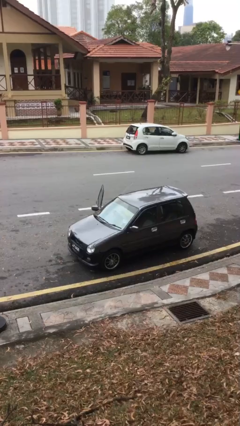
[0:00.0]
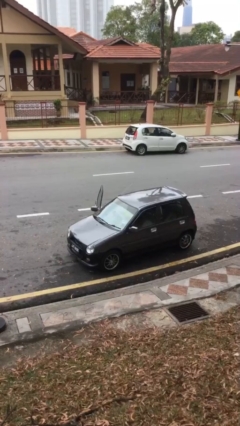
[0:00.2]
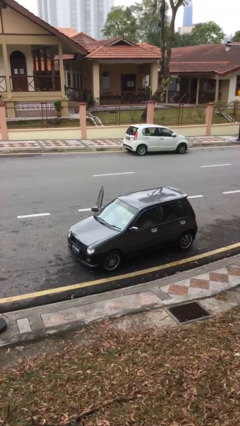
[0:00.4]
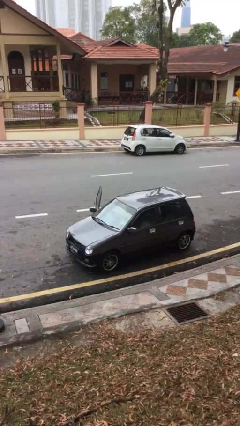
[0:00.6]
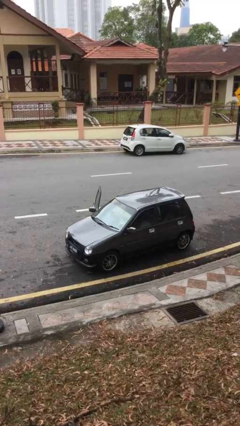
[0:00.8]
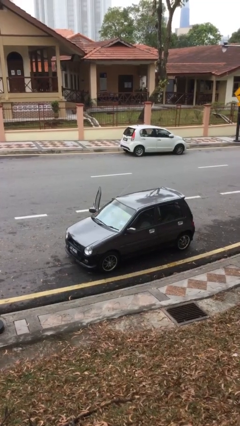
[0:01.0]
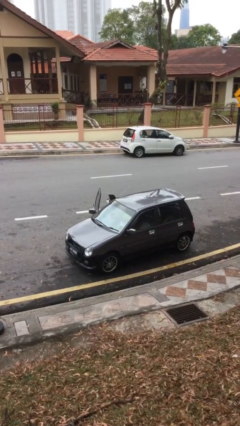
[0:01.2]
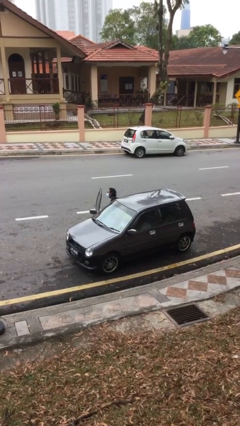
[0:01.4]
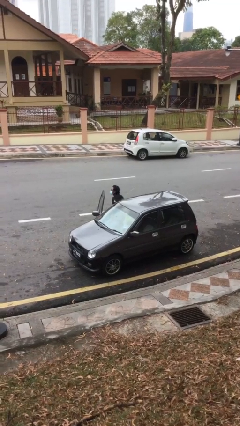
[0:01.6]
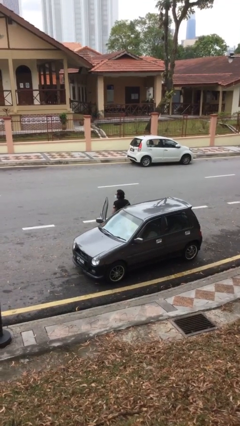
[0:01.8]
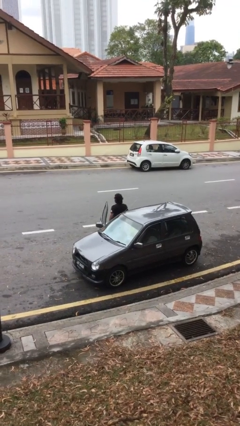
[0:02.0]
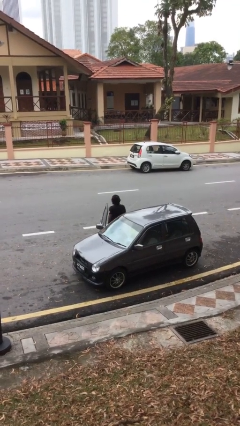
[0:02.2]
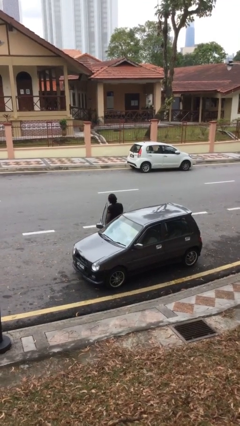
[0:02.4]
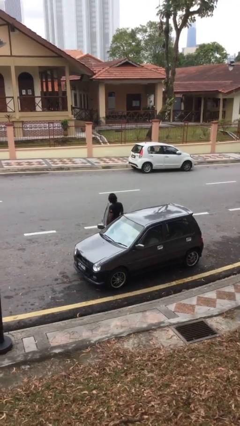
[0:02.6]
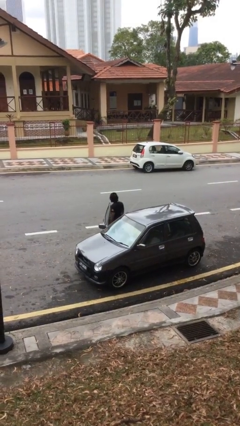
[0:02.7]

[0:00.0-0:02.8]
person exits car

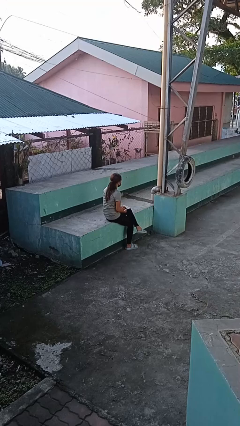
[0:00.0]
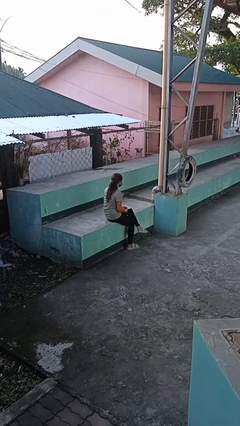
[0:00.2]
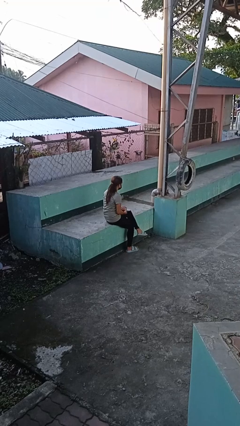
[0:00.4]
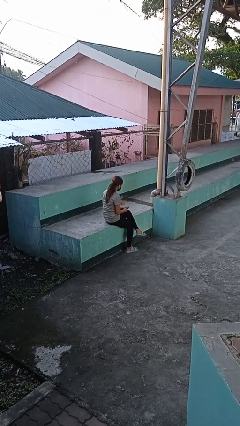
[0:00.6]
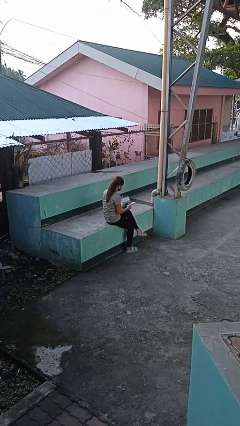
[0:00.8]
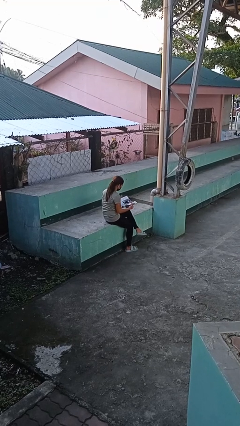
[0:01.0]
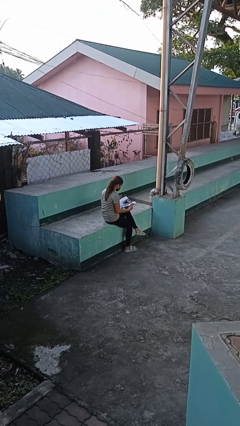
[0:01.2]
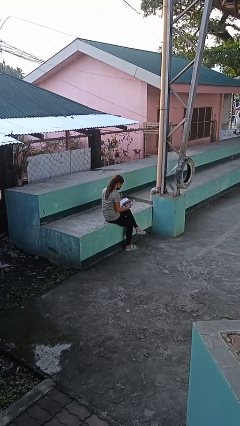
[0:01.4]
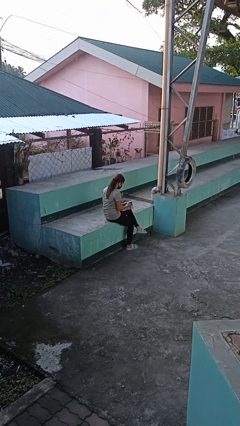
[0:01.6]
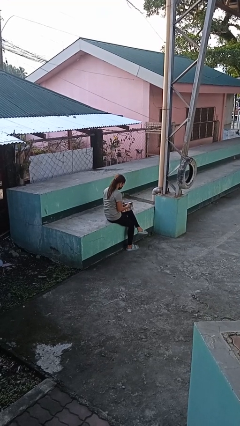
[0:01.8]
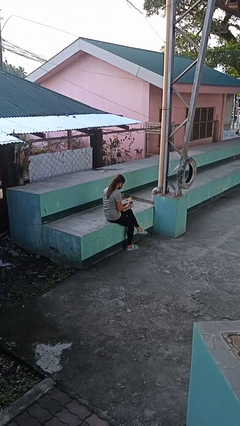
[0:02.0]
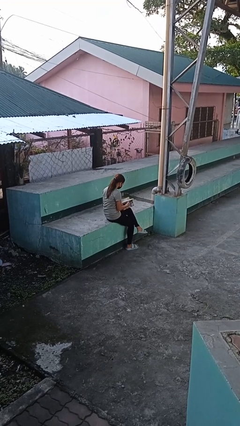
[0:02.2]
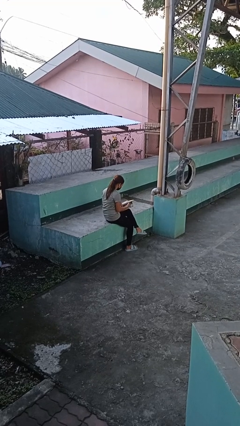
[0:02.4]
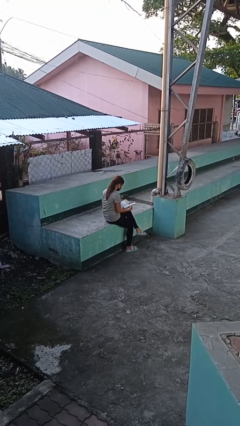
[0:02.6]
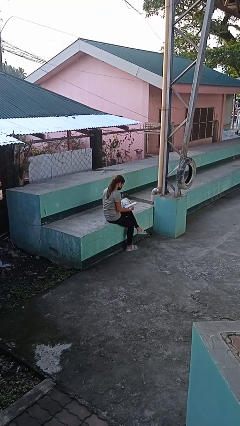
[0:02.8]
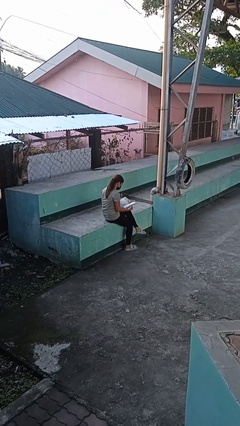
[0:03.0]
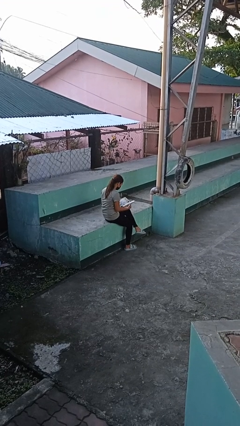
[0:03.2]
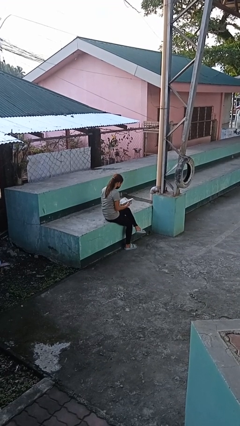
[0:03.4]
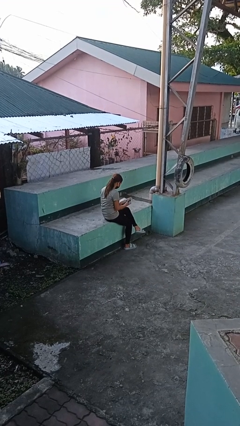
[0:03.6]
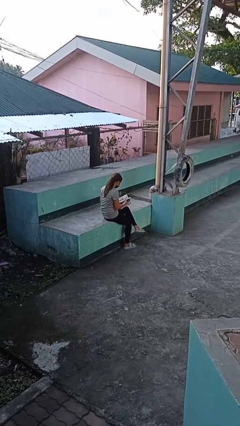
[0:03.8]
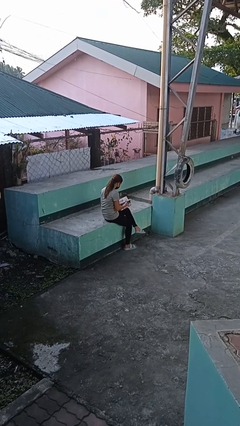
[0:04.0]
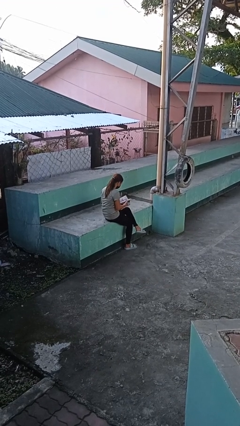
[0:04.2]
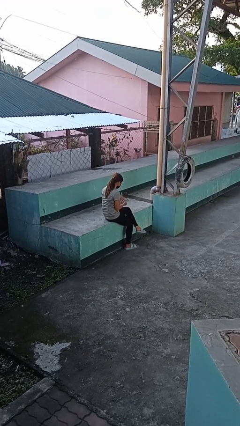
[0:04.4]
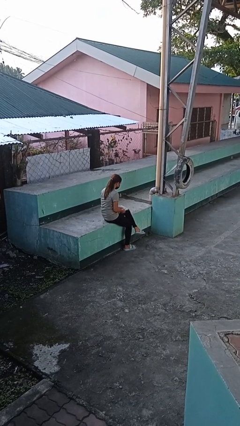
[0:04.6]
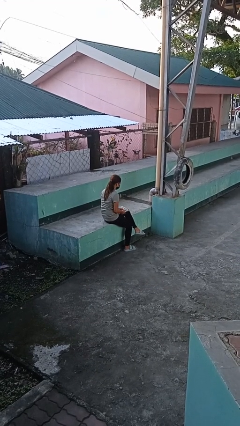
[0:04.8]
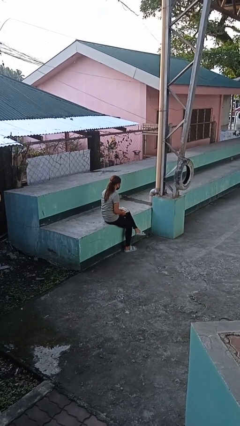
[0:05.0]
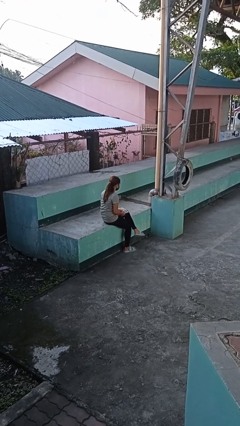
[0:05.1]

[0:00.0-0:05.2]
person reads magazine

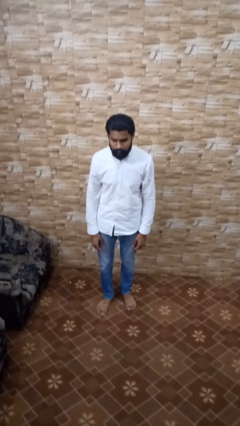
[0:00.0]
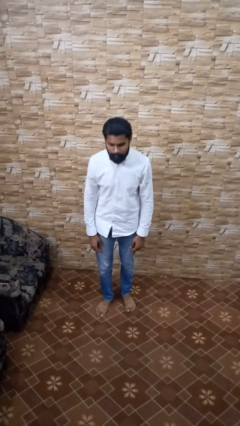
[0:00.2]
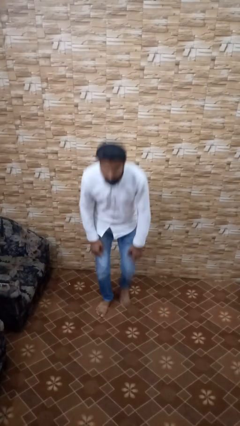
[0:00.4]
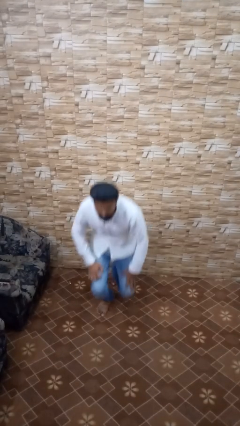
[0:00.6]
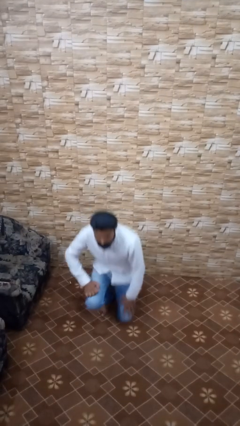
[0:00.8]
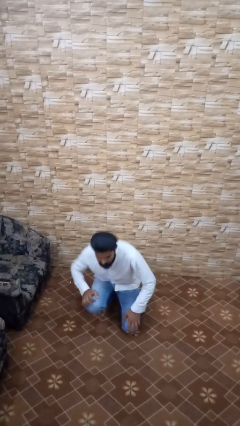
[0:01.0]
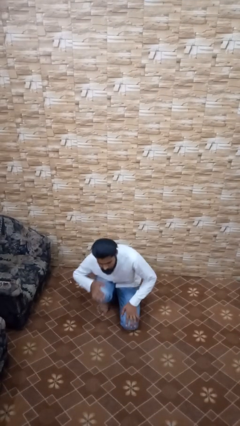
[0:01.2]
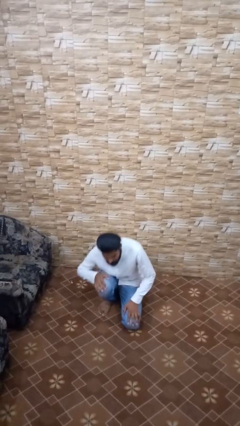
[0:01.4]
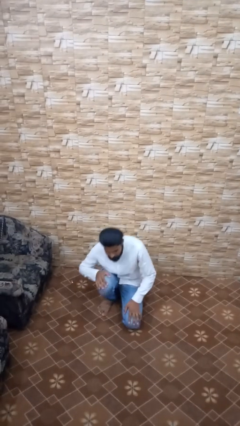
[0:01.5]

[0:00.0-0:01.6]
person kneels

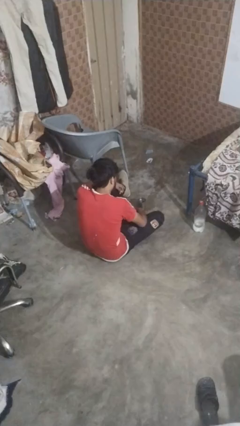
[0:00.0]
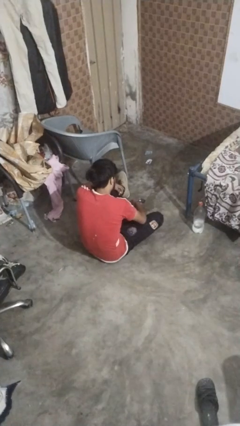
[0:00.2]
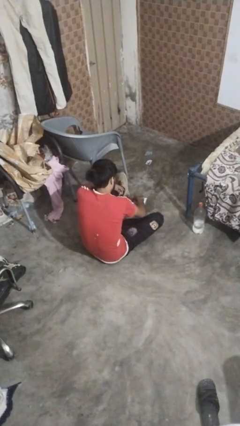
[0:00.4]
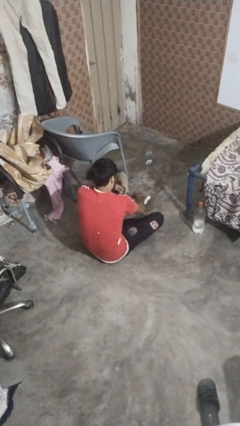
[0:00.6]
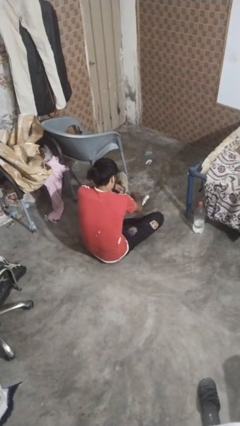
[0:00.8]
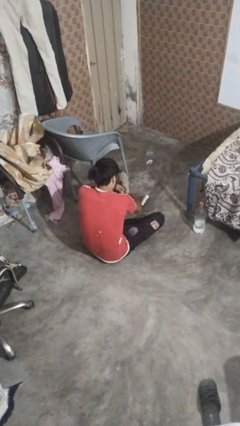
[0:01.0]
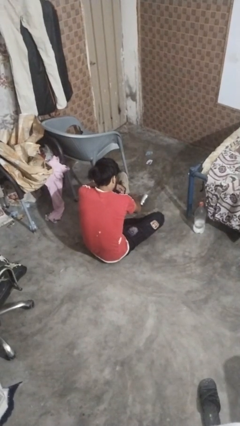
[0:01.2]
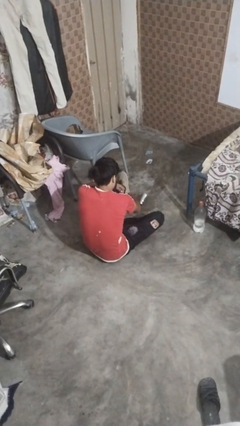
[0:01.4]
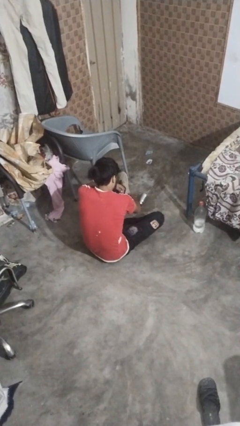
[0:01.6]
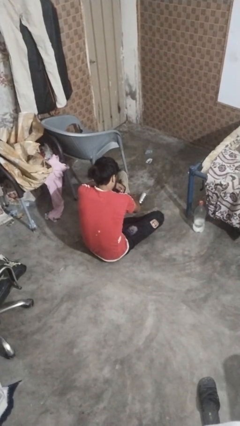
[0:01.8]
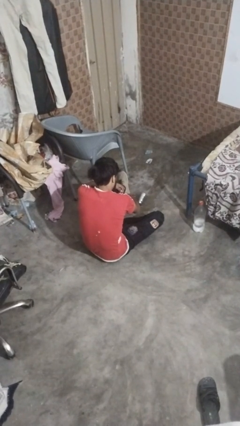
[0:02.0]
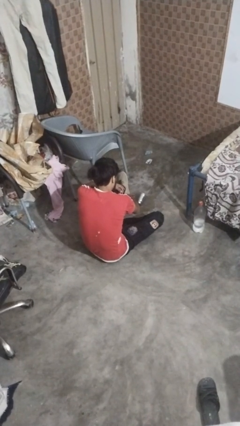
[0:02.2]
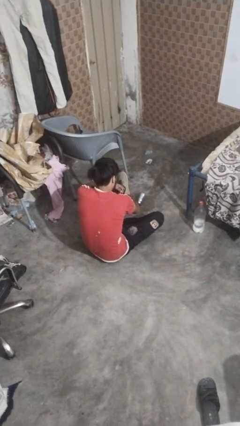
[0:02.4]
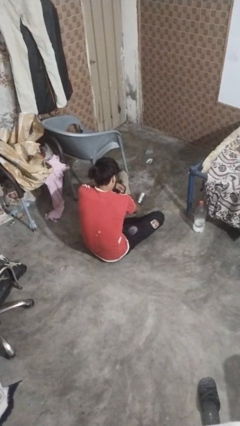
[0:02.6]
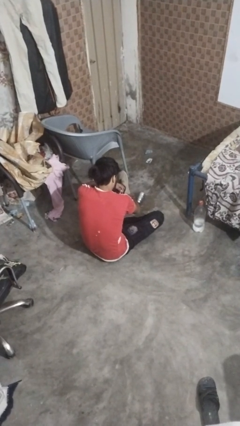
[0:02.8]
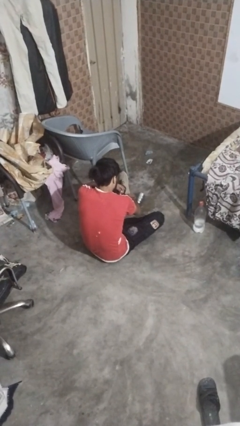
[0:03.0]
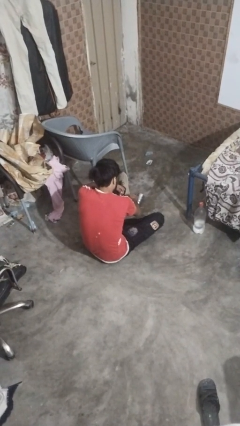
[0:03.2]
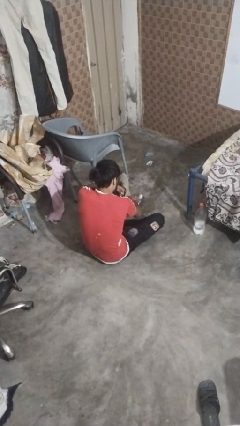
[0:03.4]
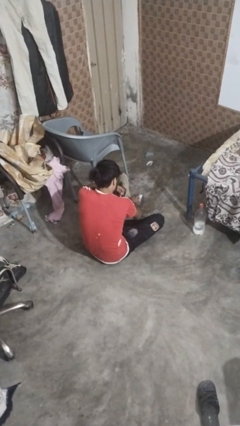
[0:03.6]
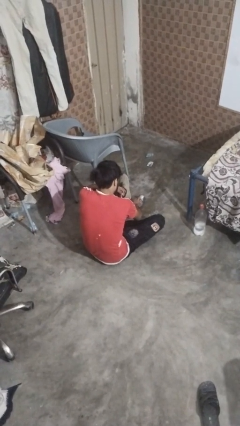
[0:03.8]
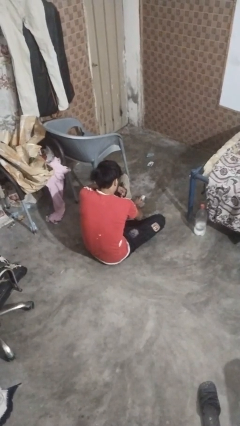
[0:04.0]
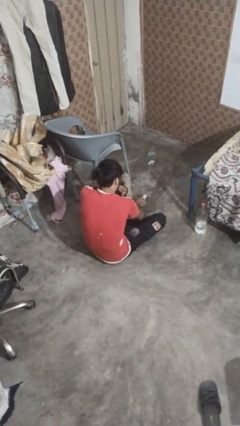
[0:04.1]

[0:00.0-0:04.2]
person spills on floor

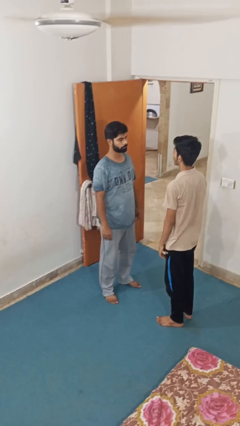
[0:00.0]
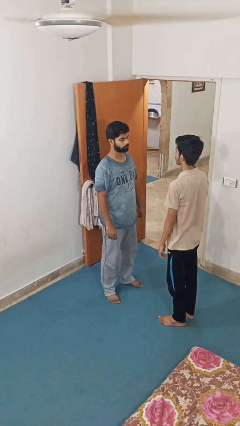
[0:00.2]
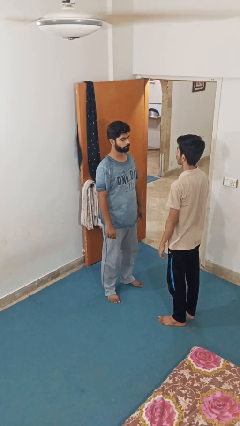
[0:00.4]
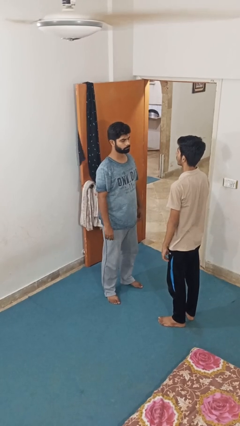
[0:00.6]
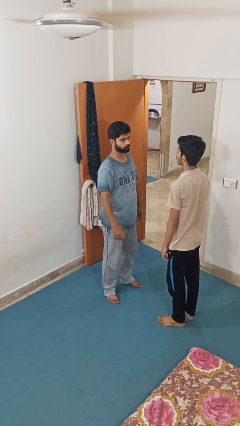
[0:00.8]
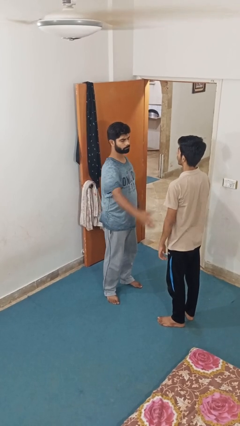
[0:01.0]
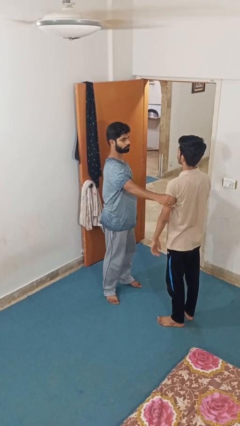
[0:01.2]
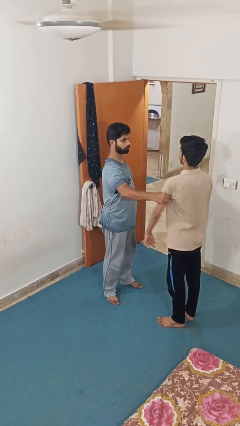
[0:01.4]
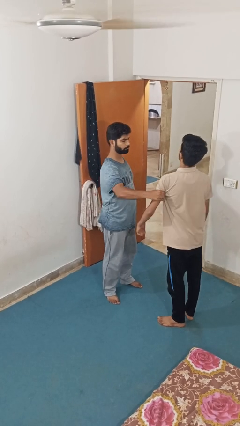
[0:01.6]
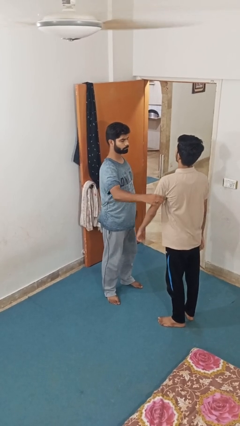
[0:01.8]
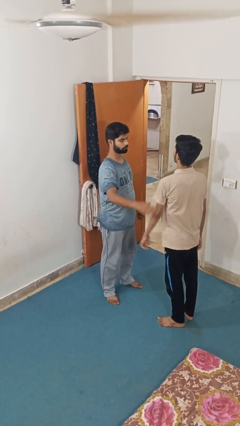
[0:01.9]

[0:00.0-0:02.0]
person grabs person by bicep

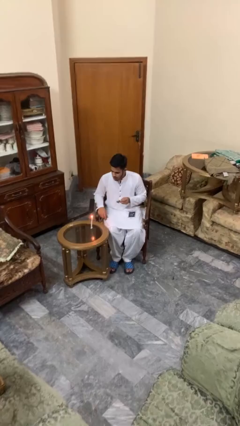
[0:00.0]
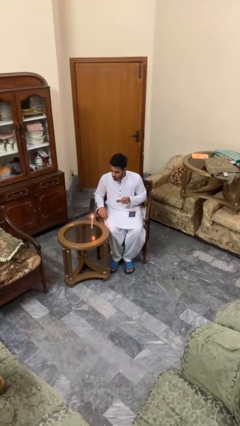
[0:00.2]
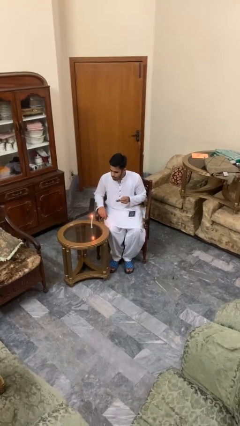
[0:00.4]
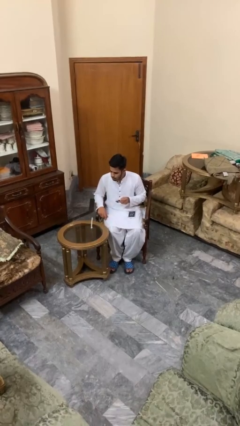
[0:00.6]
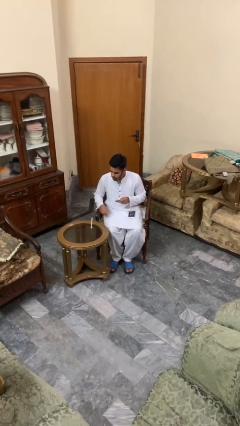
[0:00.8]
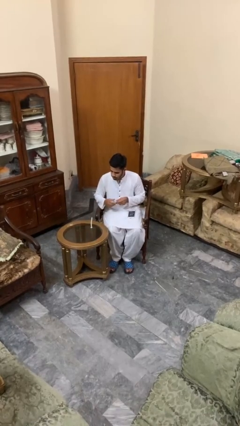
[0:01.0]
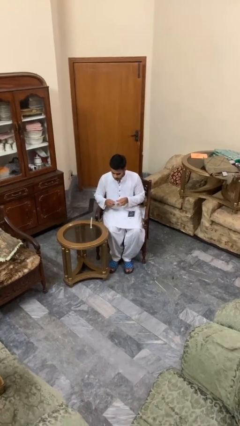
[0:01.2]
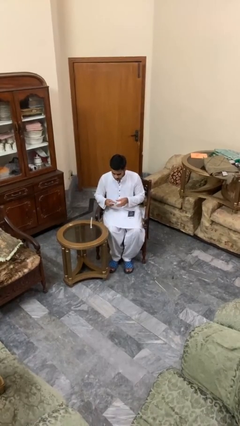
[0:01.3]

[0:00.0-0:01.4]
person extinguishes candle

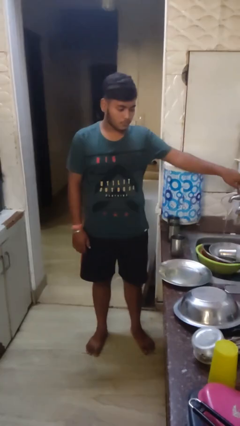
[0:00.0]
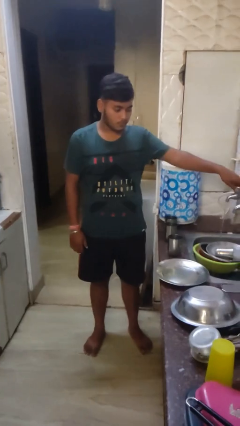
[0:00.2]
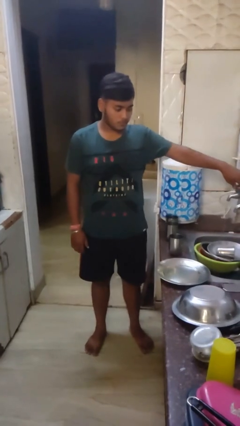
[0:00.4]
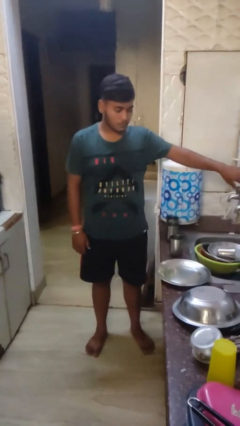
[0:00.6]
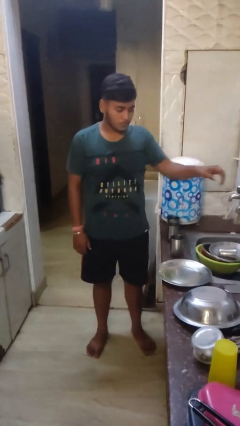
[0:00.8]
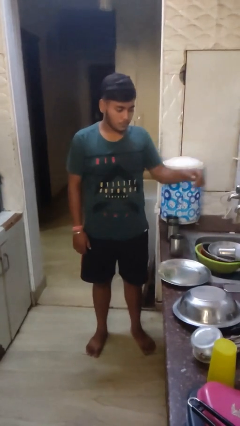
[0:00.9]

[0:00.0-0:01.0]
person turns off faucet
